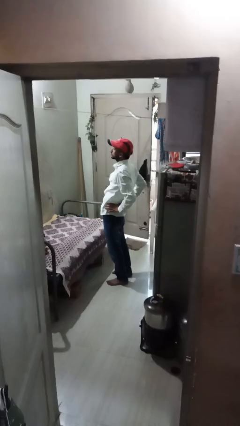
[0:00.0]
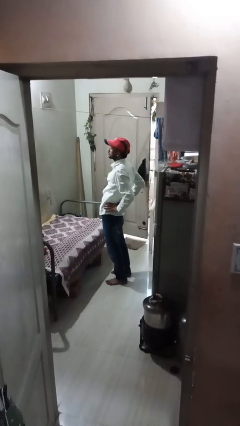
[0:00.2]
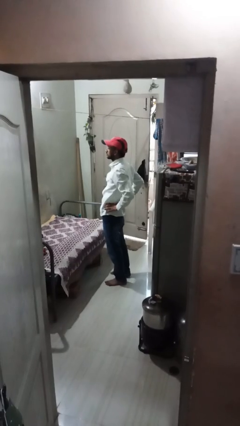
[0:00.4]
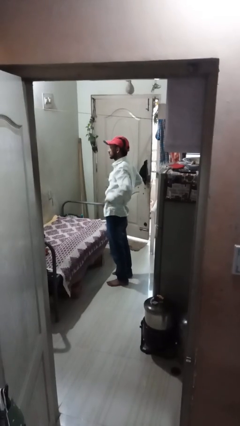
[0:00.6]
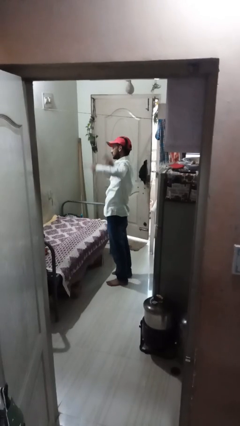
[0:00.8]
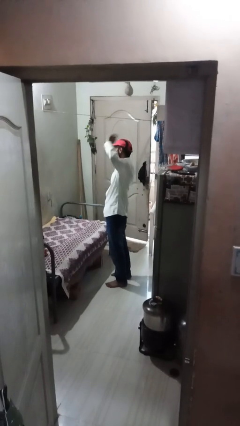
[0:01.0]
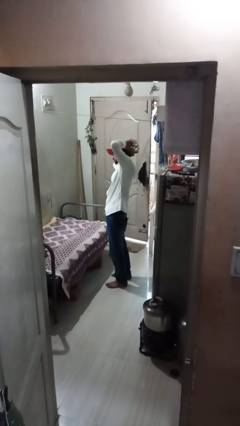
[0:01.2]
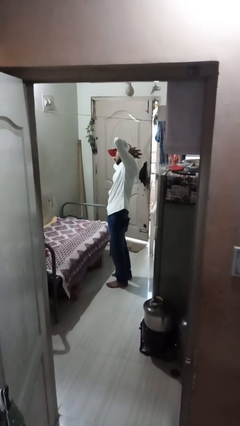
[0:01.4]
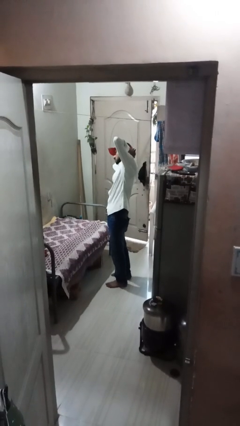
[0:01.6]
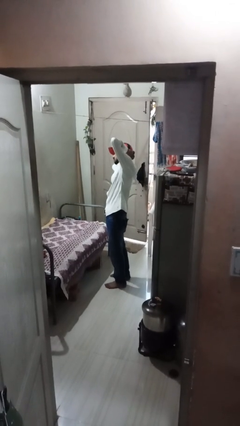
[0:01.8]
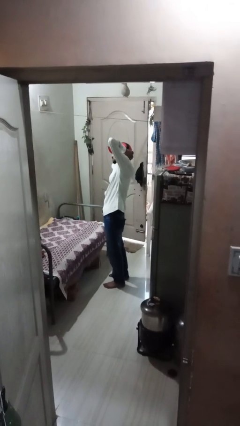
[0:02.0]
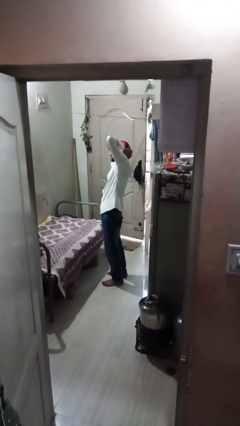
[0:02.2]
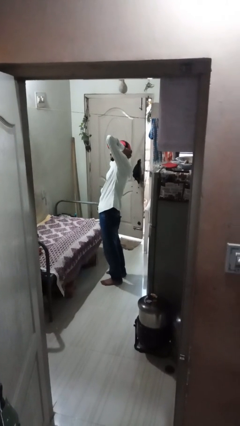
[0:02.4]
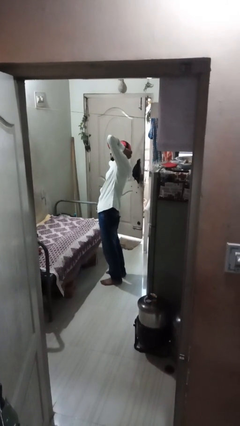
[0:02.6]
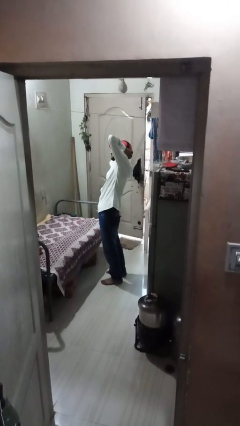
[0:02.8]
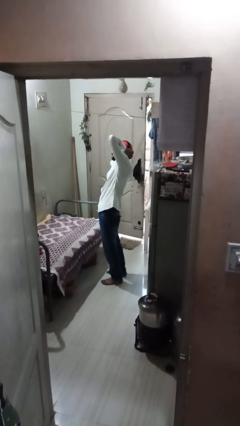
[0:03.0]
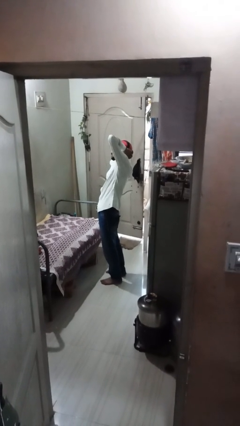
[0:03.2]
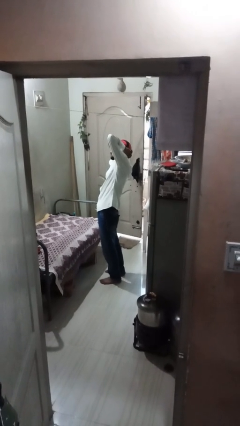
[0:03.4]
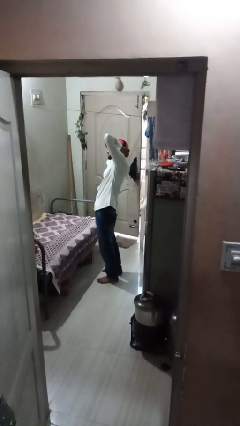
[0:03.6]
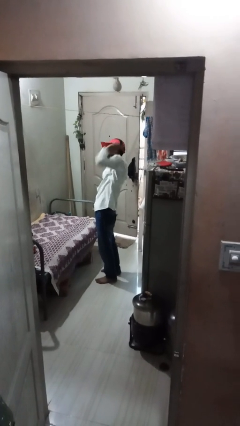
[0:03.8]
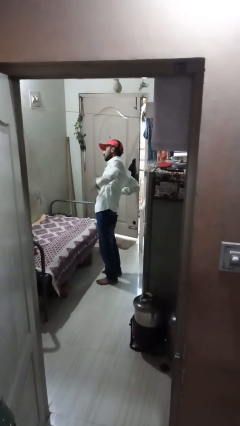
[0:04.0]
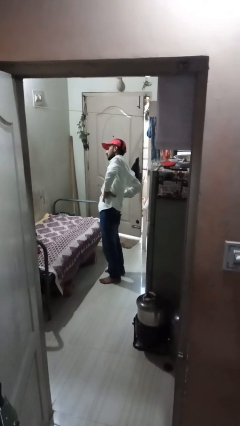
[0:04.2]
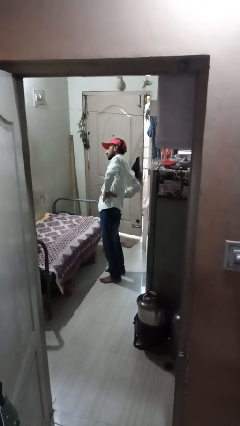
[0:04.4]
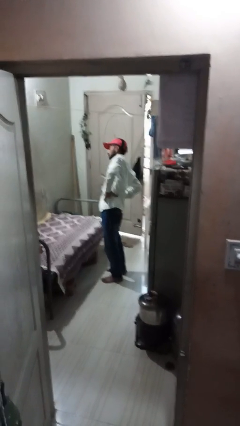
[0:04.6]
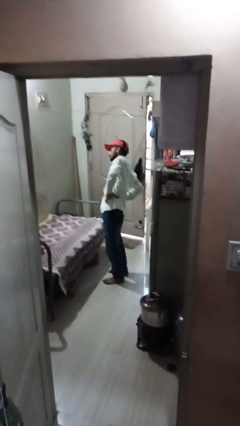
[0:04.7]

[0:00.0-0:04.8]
person stretches arms to side

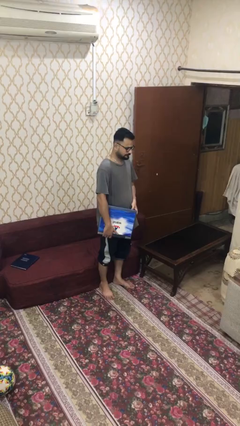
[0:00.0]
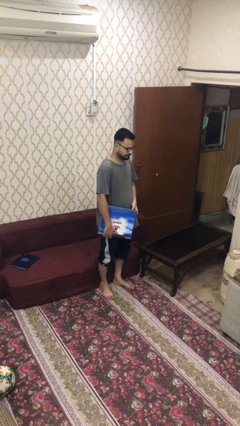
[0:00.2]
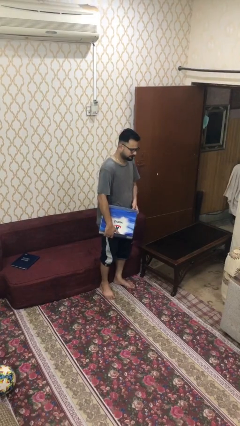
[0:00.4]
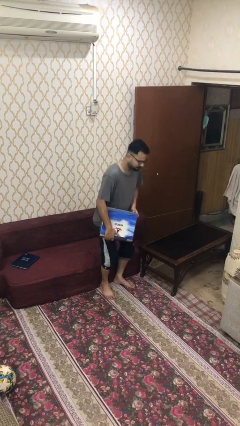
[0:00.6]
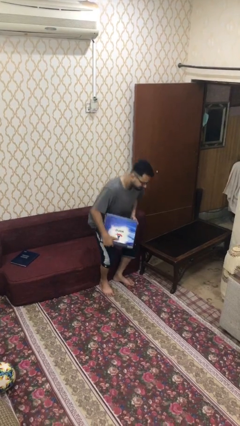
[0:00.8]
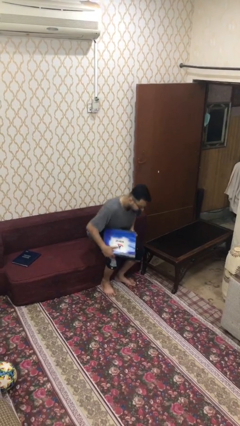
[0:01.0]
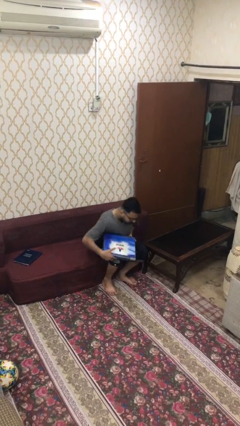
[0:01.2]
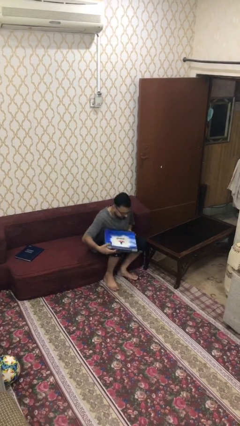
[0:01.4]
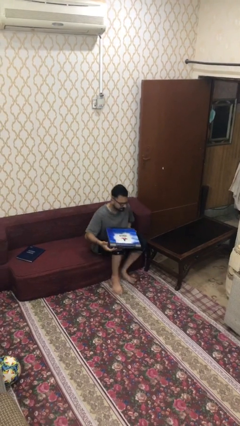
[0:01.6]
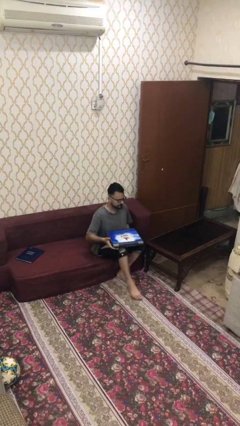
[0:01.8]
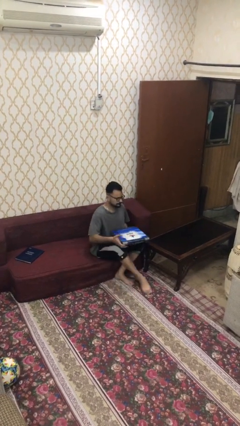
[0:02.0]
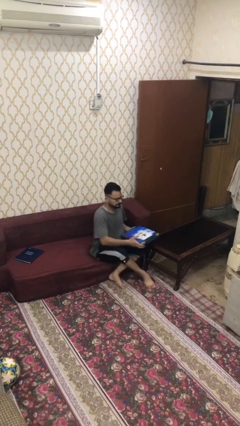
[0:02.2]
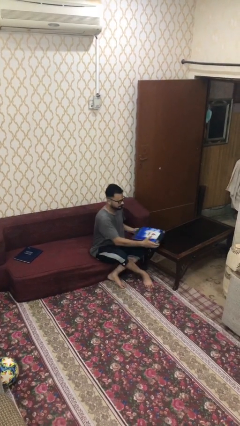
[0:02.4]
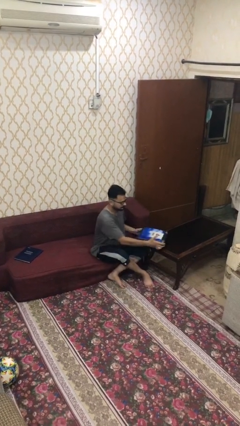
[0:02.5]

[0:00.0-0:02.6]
person sits down

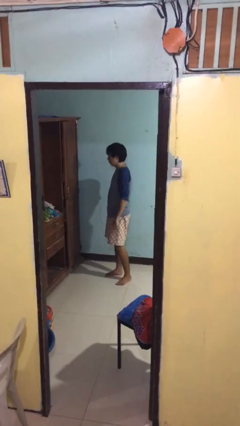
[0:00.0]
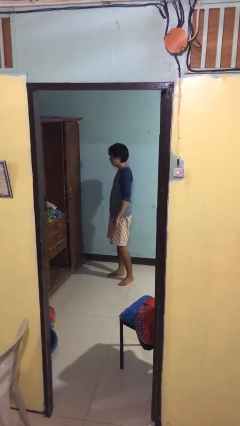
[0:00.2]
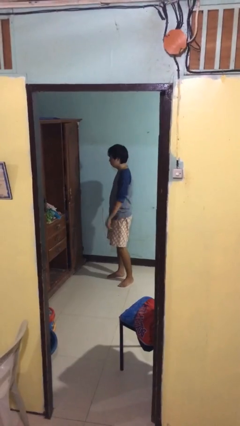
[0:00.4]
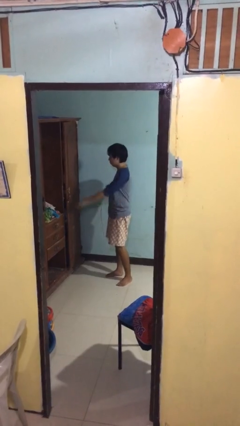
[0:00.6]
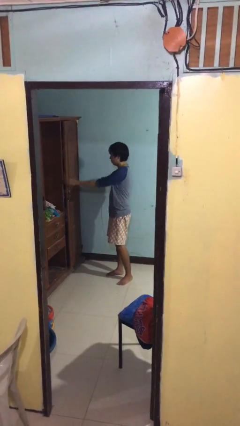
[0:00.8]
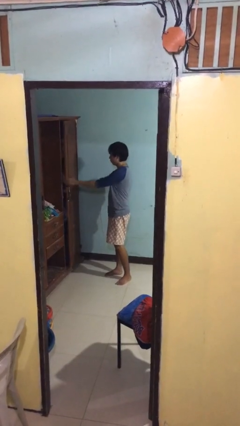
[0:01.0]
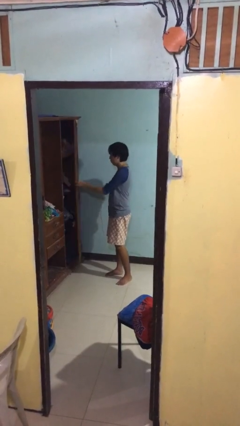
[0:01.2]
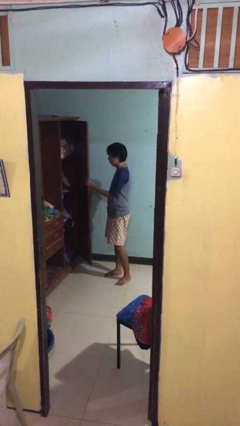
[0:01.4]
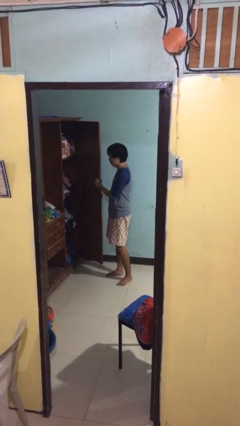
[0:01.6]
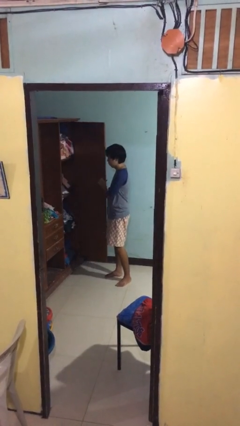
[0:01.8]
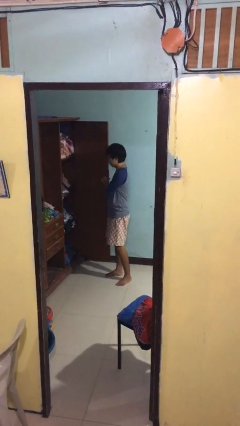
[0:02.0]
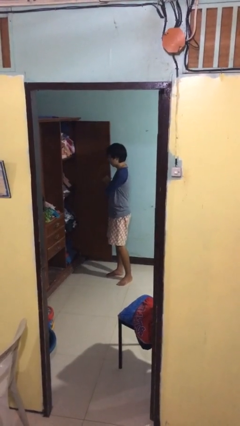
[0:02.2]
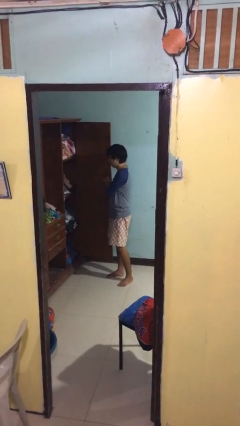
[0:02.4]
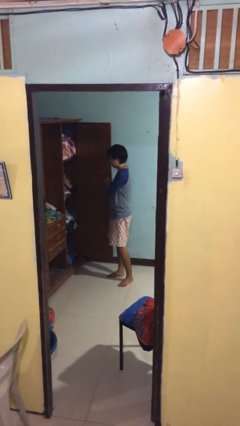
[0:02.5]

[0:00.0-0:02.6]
person opens closet door

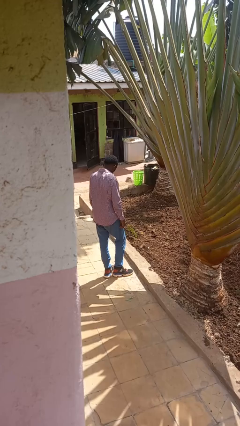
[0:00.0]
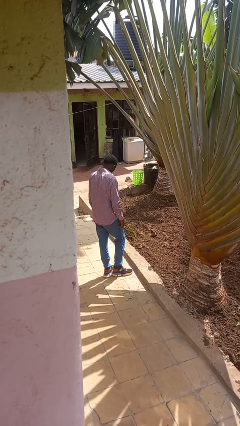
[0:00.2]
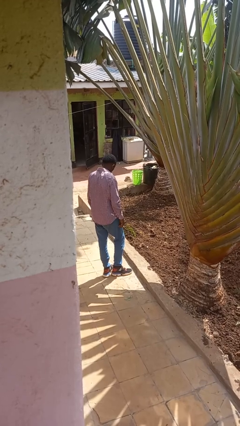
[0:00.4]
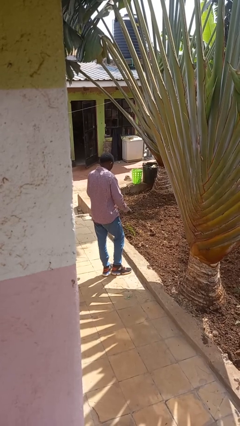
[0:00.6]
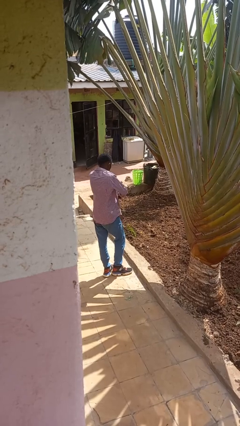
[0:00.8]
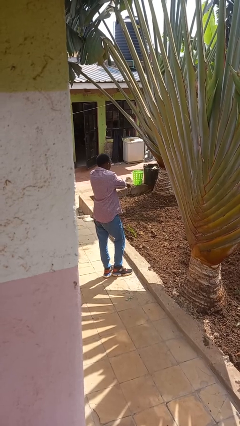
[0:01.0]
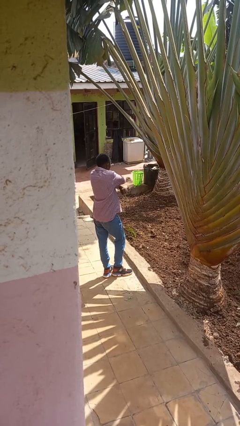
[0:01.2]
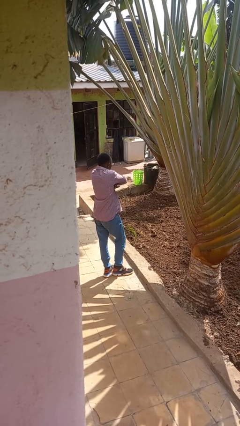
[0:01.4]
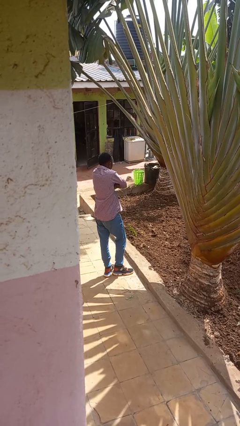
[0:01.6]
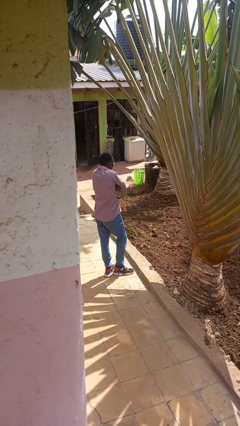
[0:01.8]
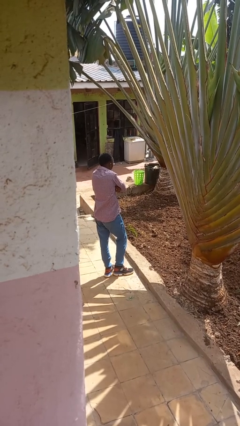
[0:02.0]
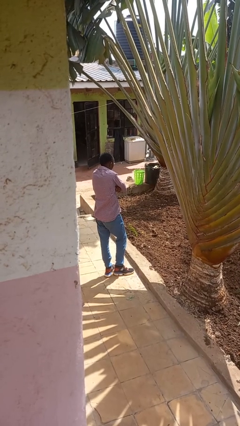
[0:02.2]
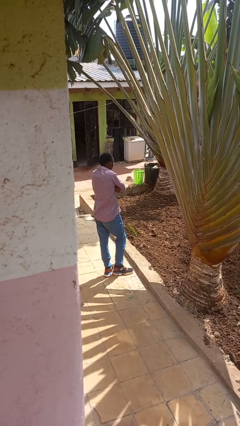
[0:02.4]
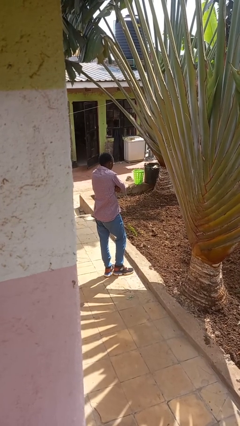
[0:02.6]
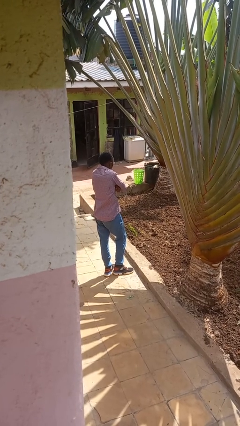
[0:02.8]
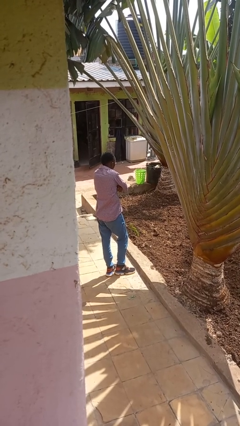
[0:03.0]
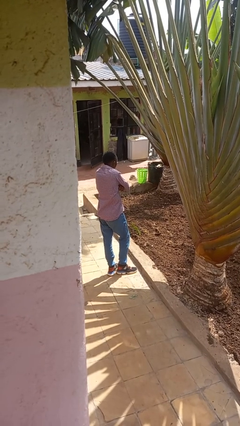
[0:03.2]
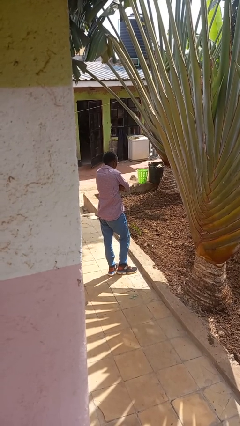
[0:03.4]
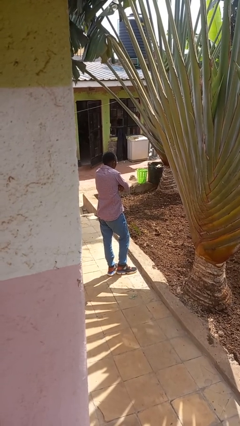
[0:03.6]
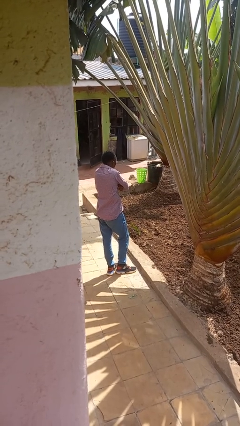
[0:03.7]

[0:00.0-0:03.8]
person crosses arms

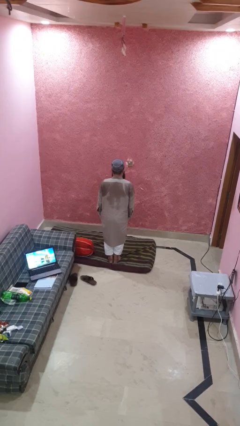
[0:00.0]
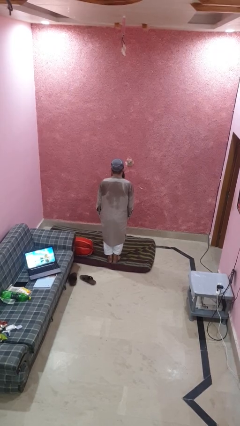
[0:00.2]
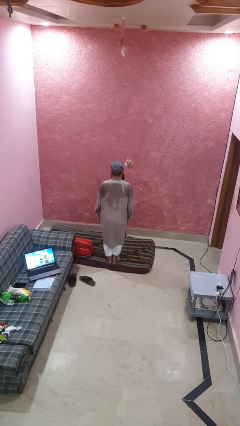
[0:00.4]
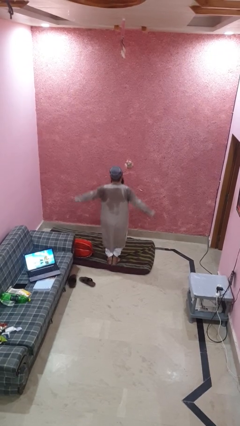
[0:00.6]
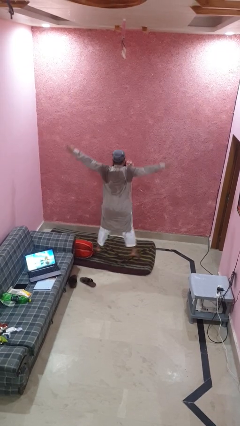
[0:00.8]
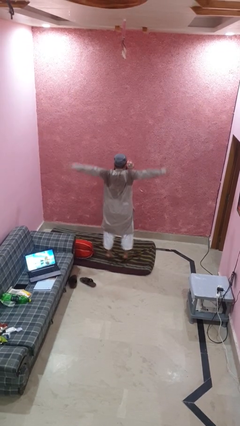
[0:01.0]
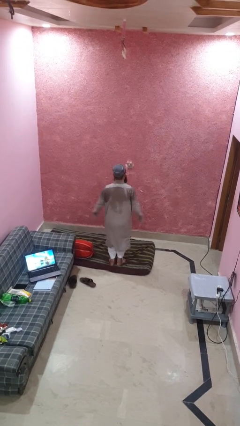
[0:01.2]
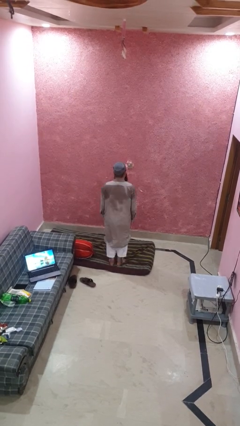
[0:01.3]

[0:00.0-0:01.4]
person exercises with jumping jacks

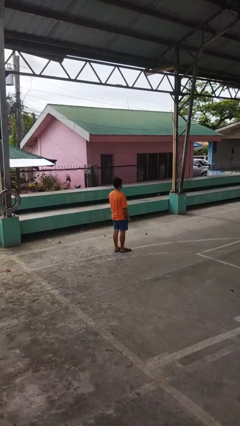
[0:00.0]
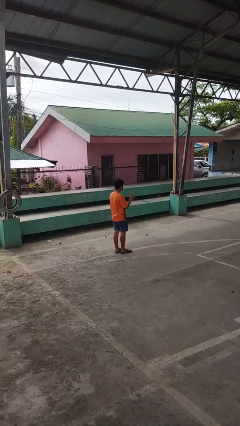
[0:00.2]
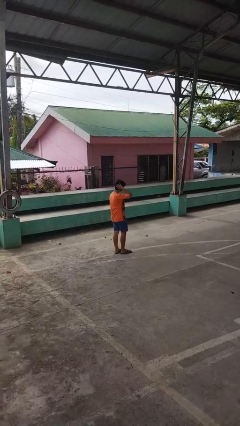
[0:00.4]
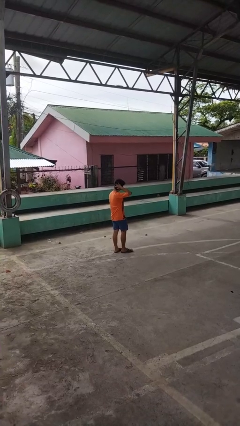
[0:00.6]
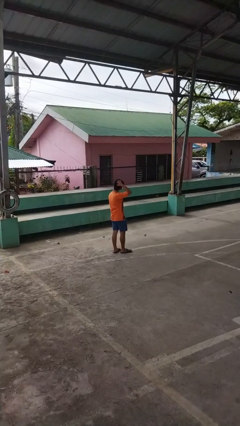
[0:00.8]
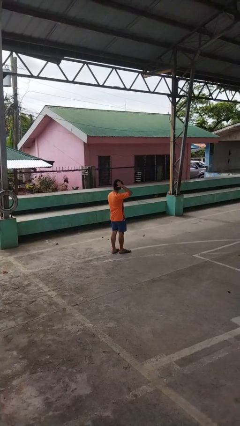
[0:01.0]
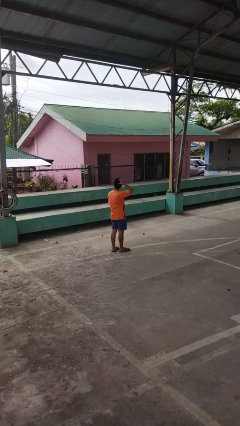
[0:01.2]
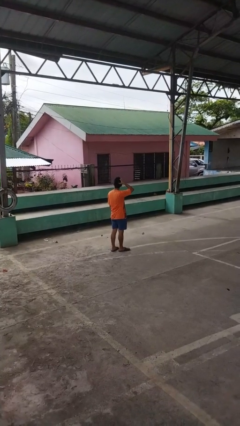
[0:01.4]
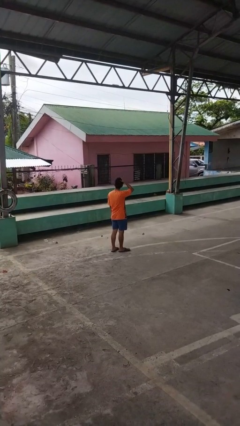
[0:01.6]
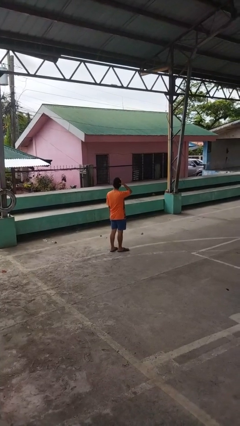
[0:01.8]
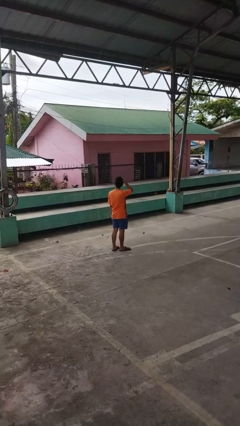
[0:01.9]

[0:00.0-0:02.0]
person scratches face

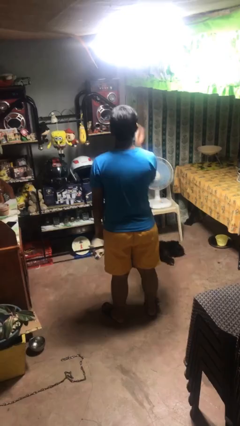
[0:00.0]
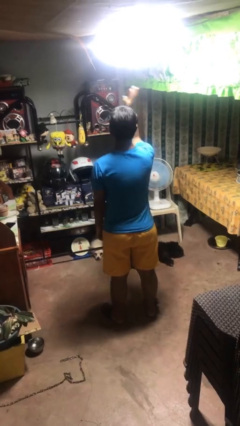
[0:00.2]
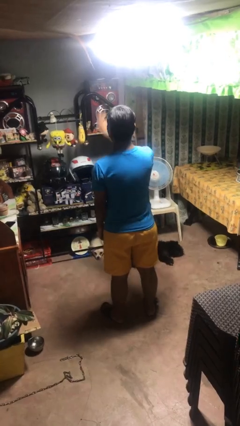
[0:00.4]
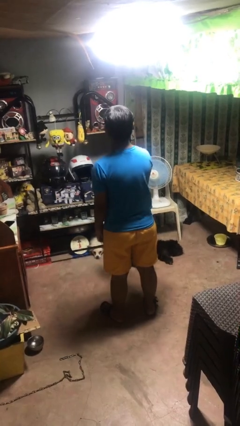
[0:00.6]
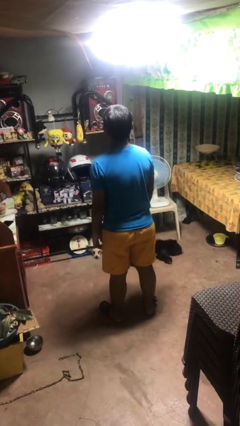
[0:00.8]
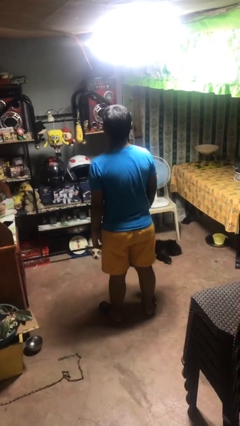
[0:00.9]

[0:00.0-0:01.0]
person gestures swipe down
